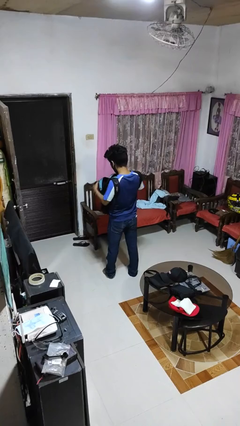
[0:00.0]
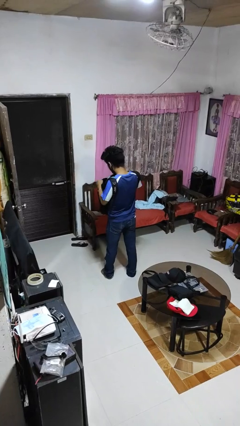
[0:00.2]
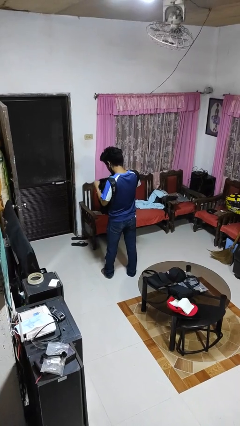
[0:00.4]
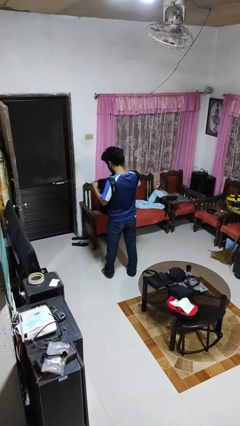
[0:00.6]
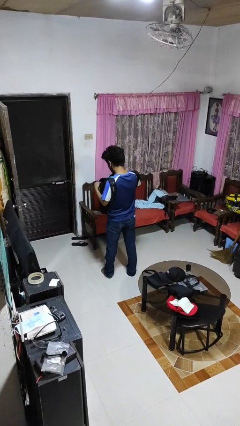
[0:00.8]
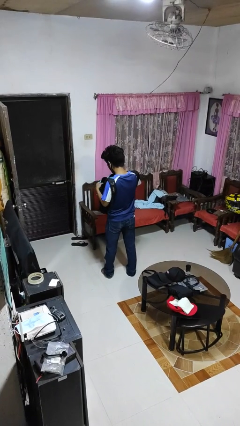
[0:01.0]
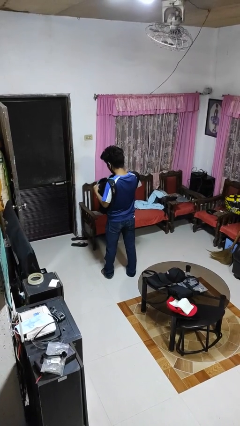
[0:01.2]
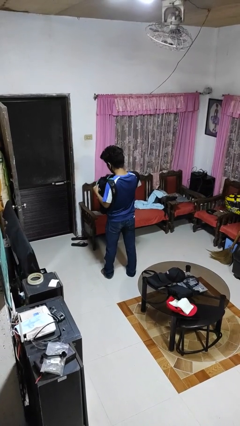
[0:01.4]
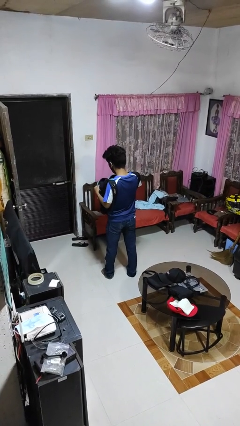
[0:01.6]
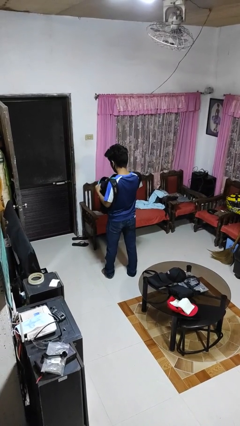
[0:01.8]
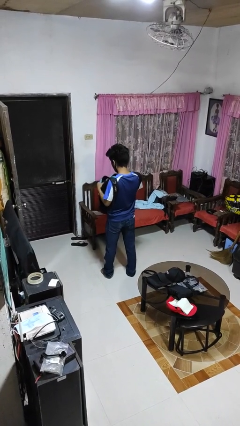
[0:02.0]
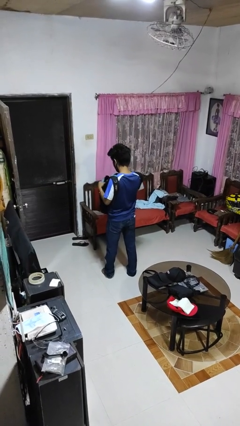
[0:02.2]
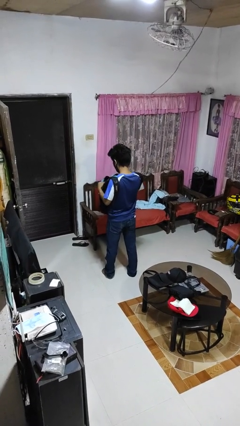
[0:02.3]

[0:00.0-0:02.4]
person searches in backpack

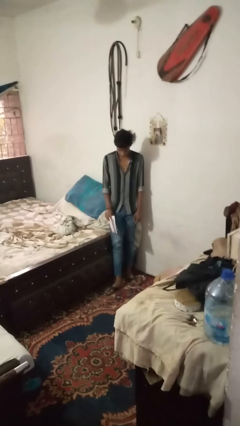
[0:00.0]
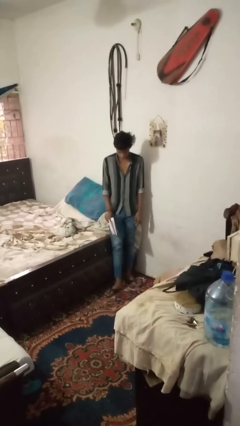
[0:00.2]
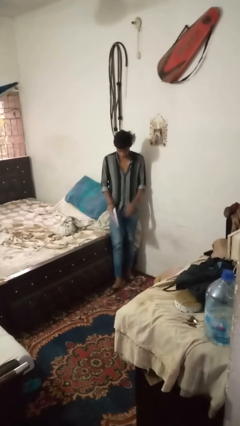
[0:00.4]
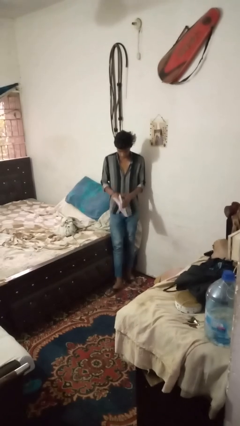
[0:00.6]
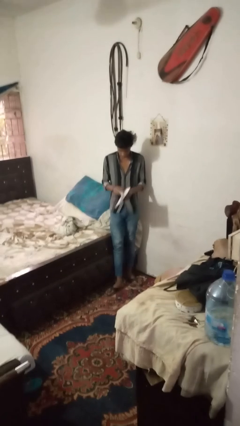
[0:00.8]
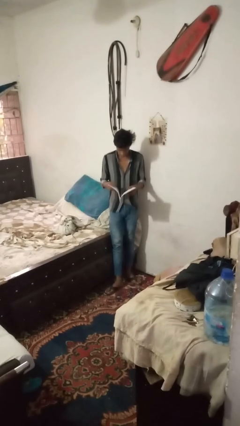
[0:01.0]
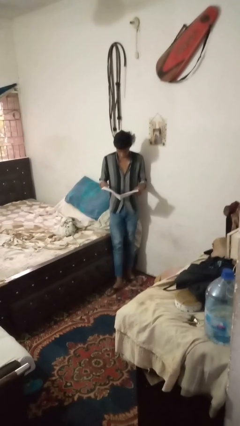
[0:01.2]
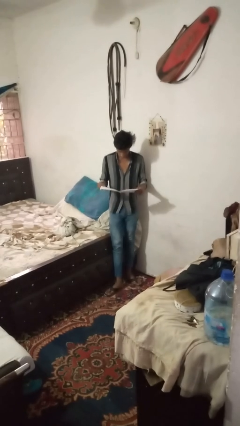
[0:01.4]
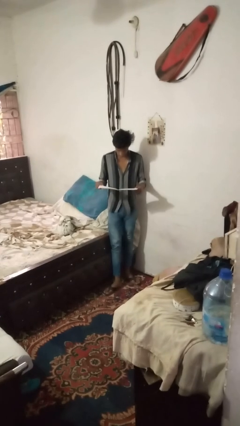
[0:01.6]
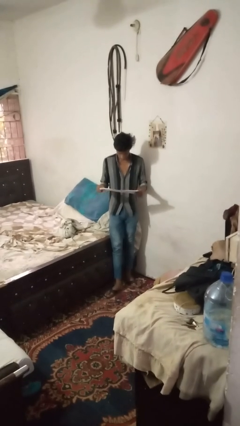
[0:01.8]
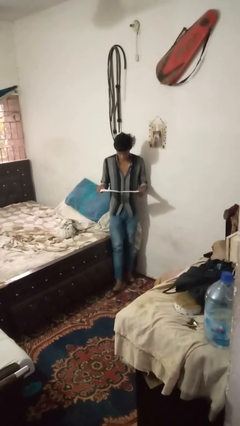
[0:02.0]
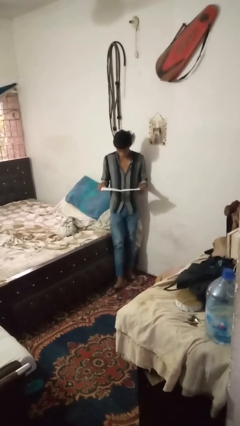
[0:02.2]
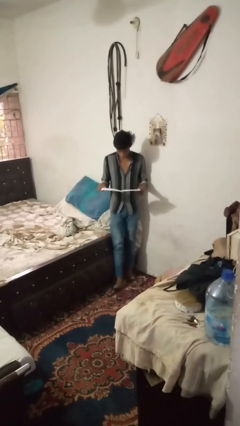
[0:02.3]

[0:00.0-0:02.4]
person reads newspaper

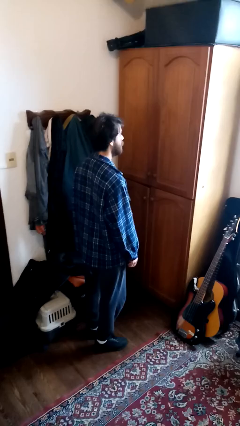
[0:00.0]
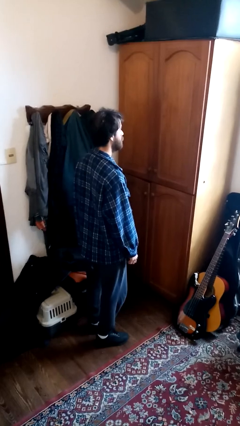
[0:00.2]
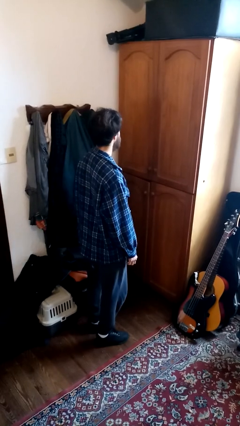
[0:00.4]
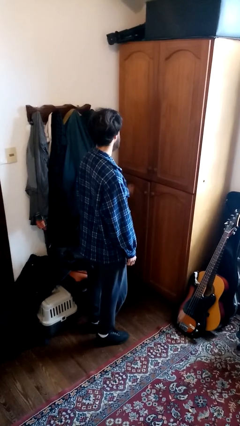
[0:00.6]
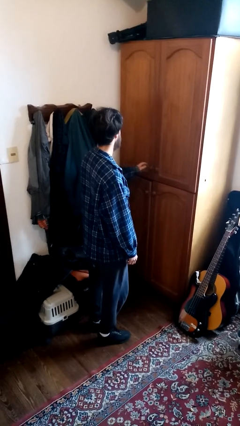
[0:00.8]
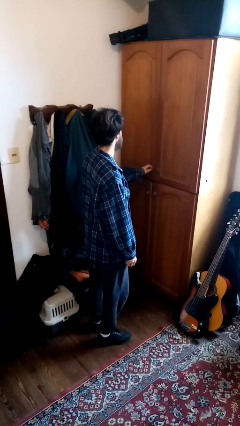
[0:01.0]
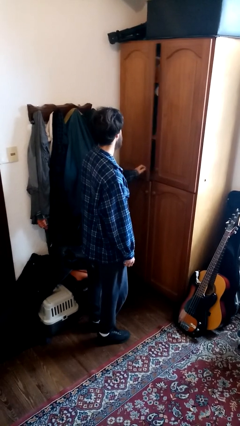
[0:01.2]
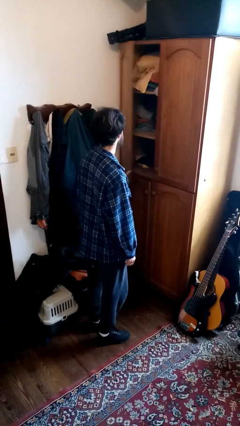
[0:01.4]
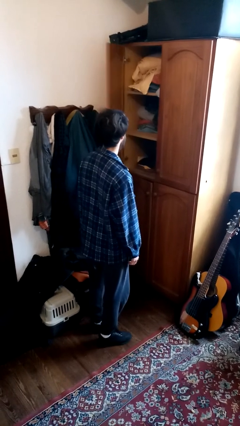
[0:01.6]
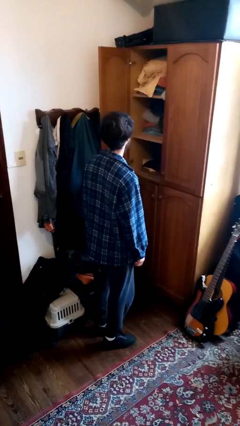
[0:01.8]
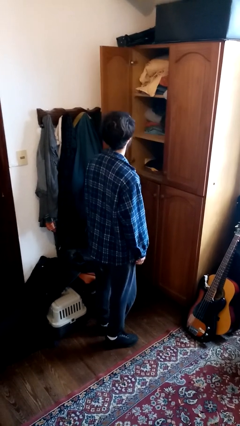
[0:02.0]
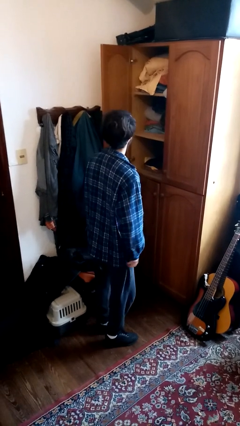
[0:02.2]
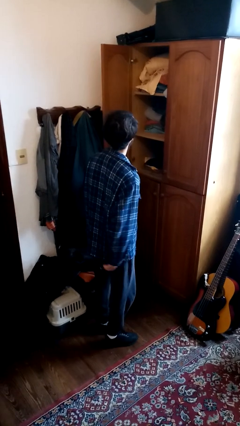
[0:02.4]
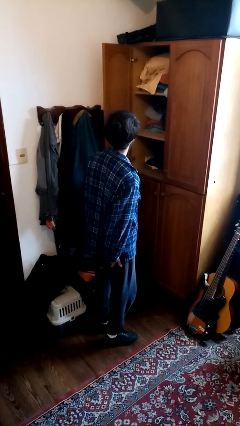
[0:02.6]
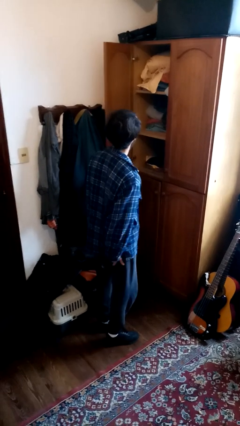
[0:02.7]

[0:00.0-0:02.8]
person opens dresser drawer

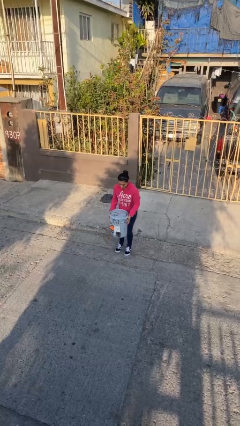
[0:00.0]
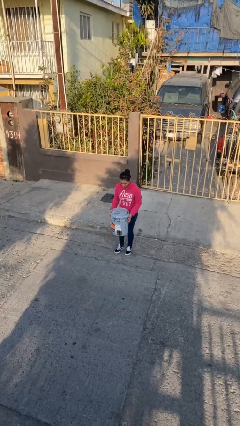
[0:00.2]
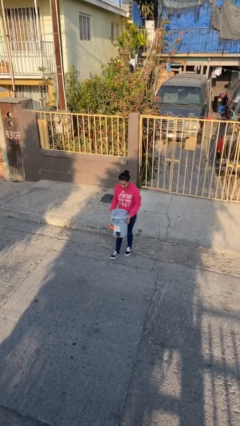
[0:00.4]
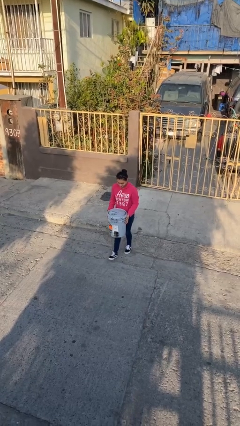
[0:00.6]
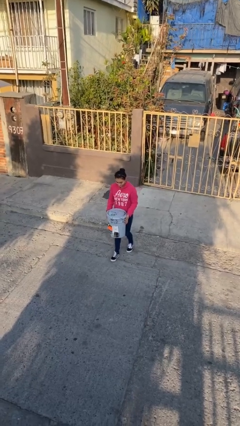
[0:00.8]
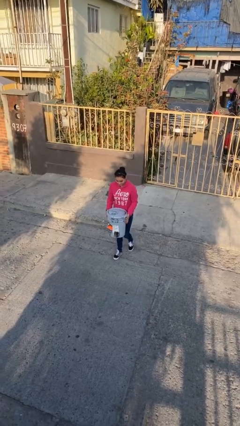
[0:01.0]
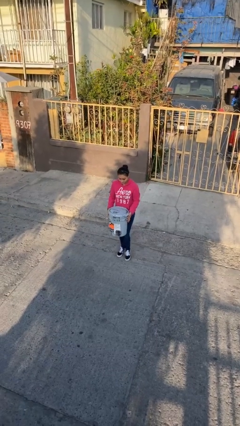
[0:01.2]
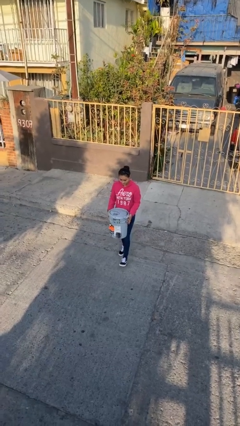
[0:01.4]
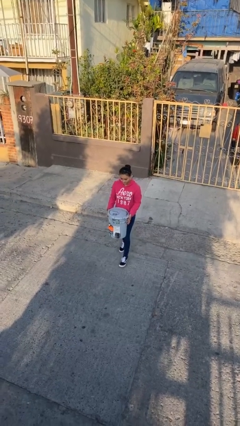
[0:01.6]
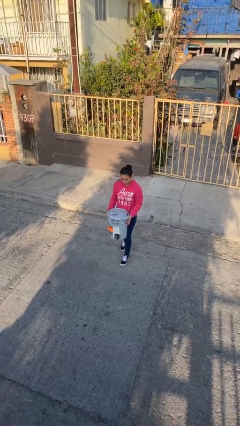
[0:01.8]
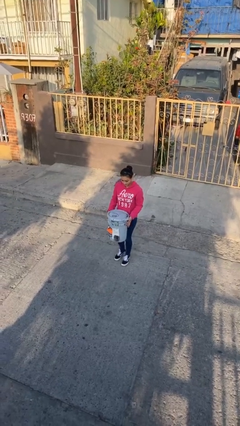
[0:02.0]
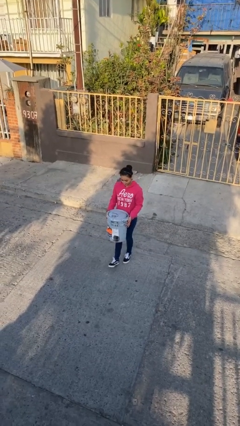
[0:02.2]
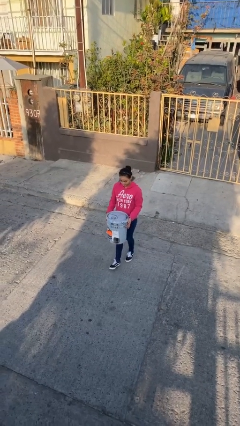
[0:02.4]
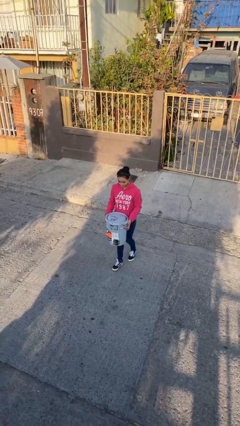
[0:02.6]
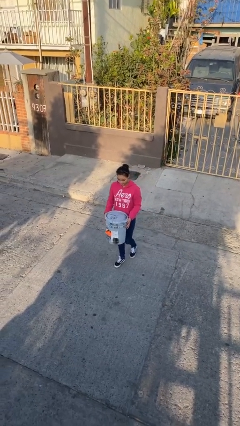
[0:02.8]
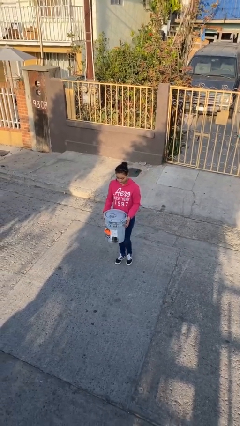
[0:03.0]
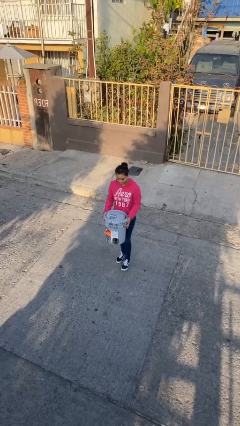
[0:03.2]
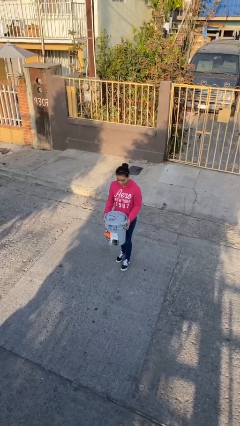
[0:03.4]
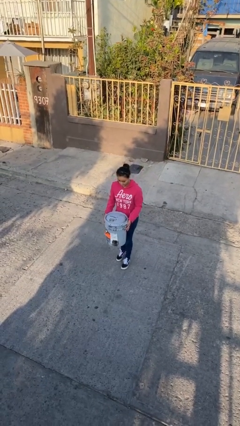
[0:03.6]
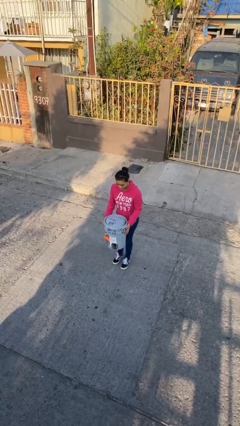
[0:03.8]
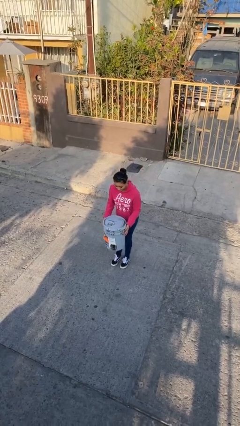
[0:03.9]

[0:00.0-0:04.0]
person carries heavy object

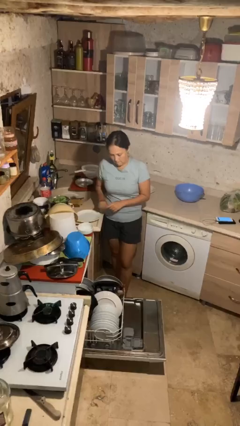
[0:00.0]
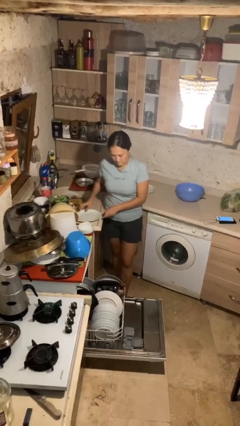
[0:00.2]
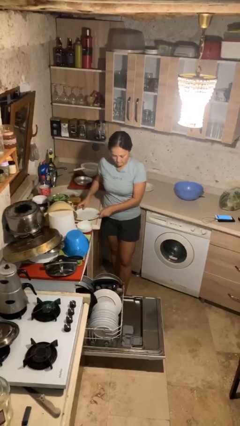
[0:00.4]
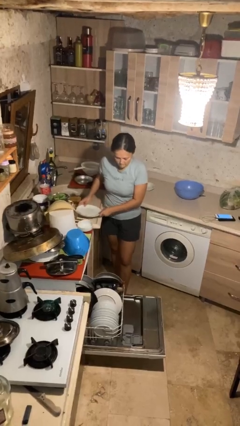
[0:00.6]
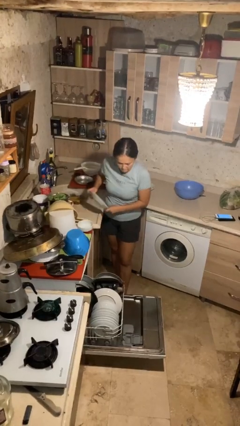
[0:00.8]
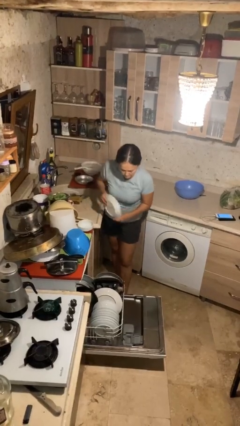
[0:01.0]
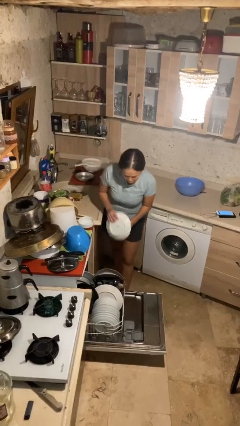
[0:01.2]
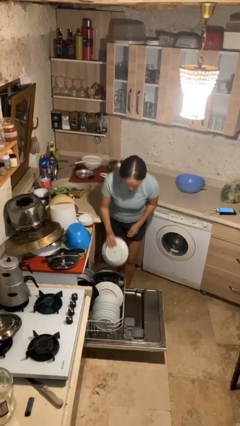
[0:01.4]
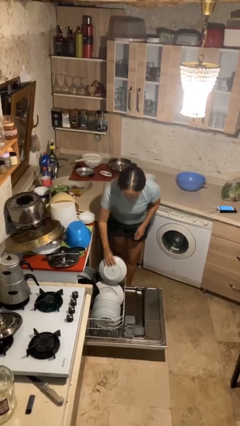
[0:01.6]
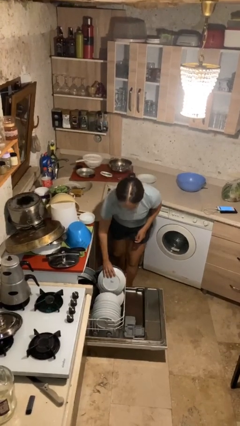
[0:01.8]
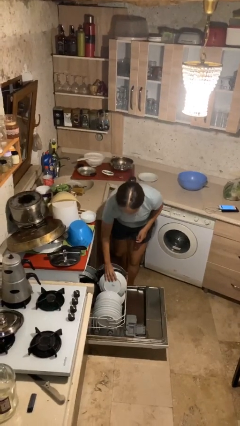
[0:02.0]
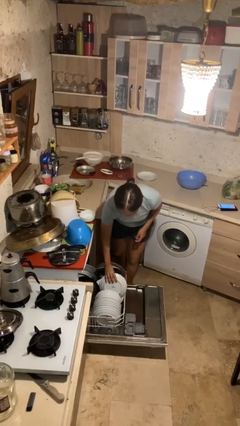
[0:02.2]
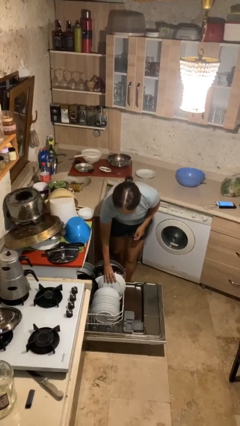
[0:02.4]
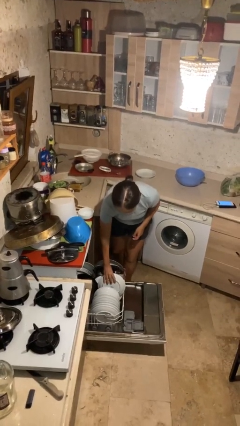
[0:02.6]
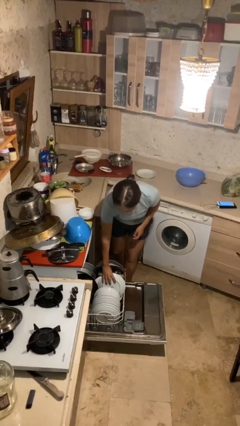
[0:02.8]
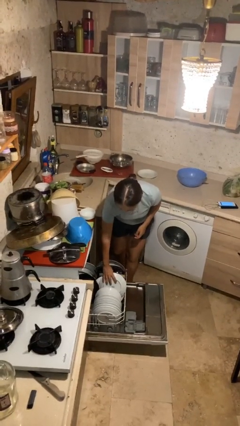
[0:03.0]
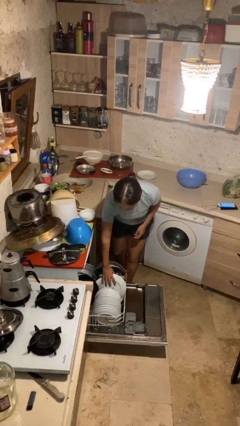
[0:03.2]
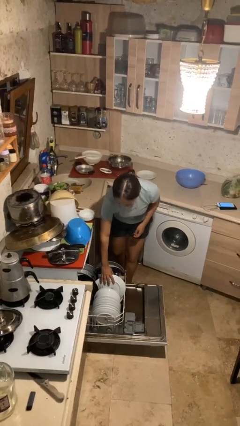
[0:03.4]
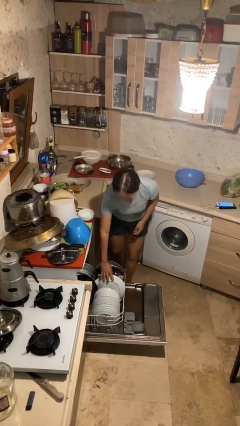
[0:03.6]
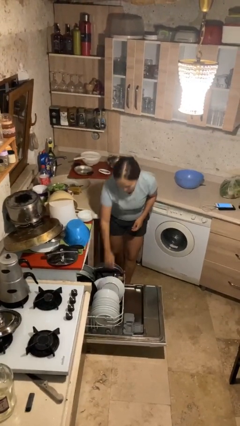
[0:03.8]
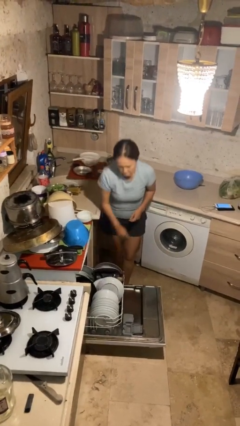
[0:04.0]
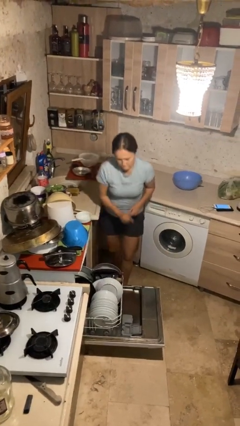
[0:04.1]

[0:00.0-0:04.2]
person loads dishwasher

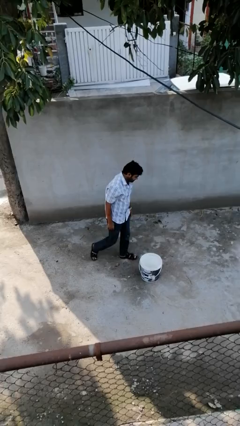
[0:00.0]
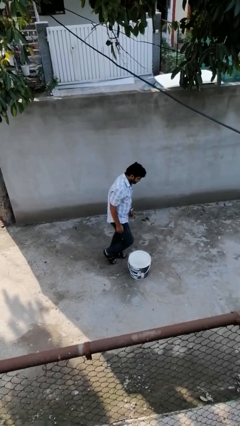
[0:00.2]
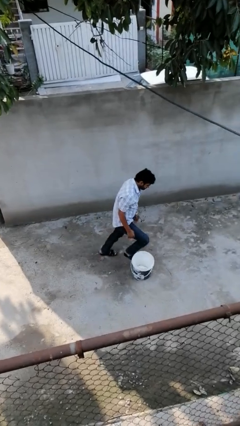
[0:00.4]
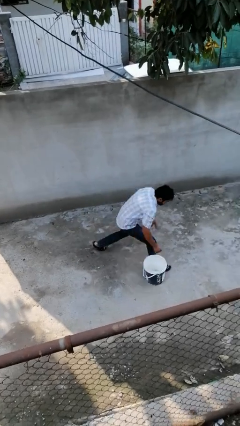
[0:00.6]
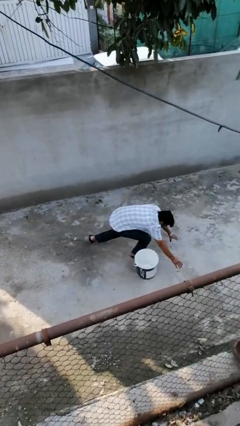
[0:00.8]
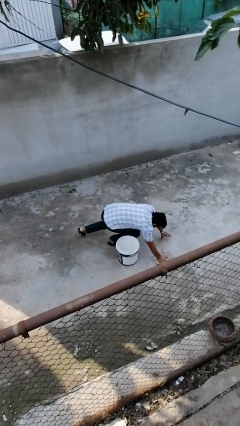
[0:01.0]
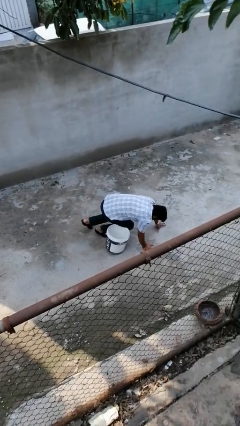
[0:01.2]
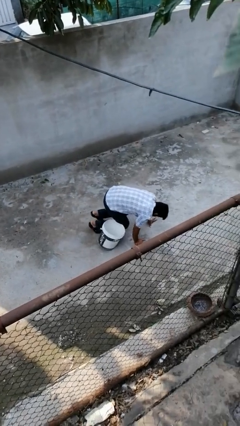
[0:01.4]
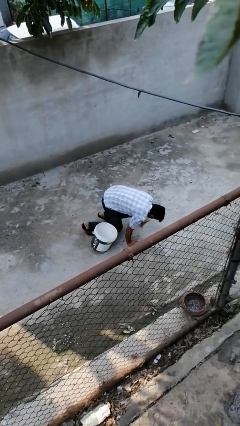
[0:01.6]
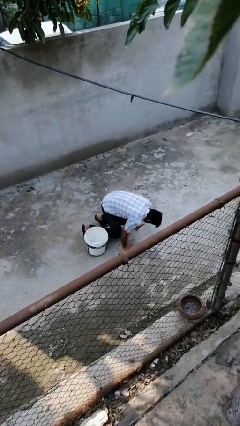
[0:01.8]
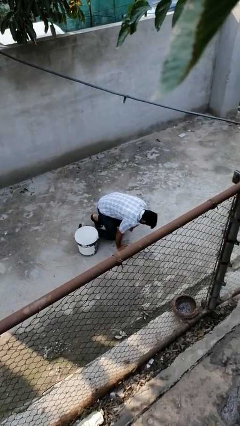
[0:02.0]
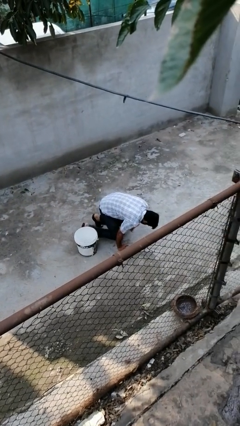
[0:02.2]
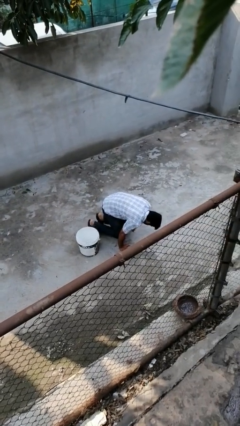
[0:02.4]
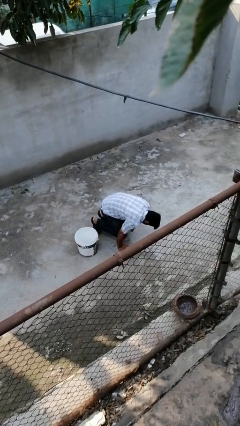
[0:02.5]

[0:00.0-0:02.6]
person trips on object on floor
